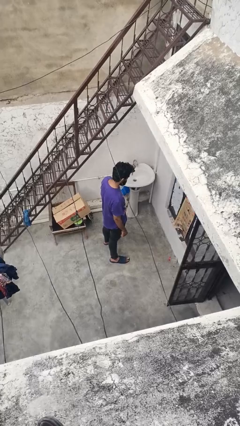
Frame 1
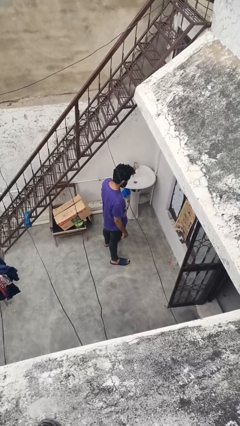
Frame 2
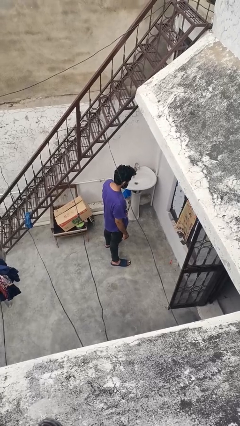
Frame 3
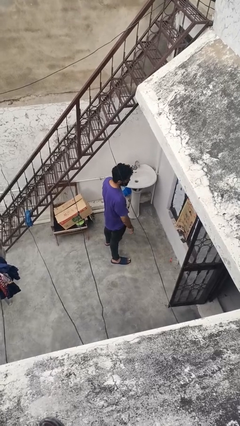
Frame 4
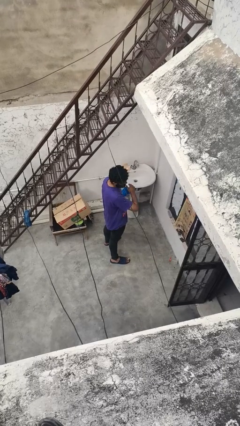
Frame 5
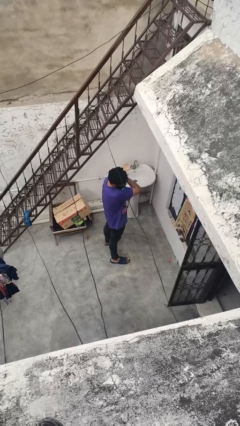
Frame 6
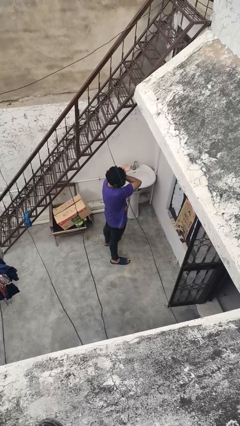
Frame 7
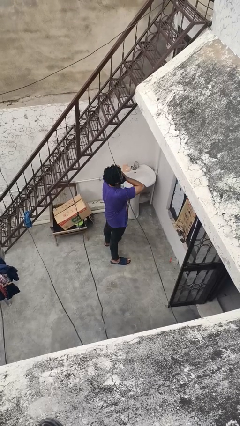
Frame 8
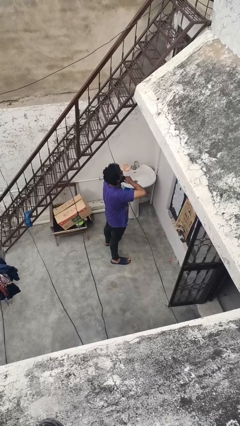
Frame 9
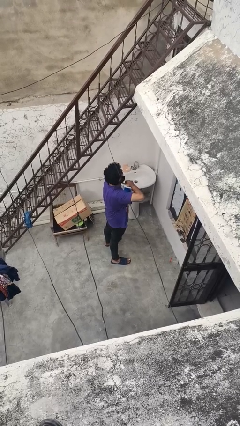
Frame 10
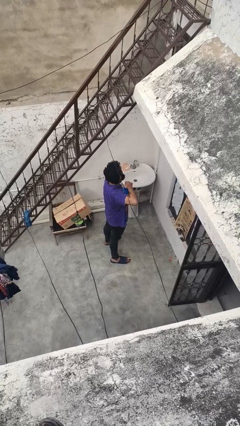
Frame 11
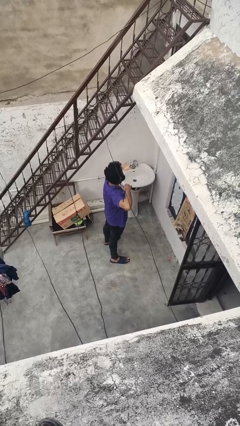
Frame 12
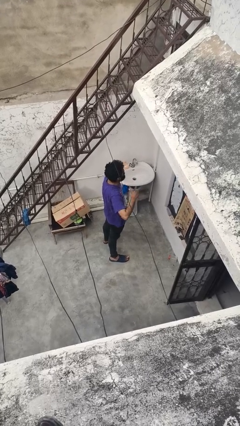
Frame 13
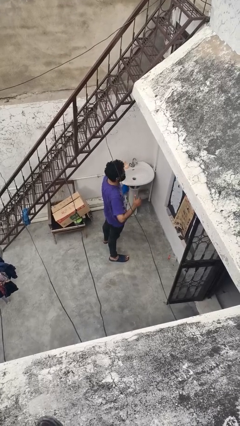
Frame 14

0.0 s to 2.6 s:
person gestures cut

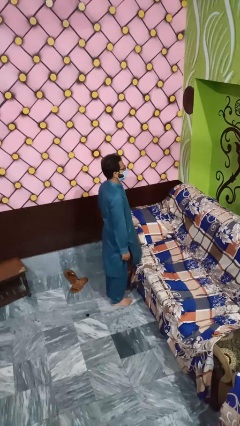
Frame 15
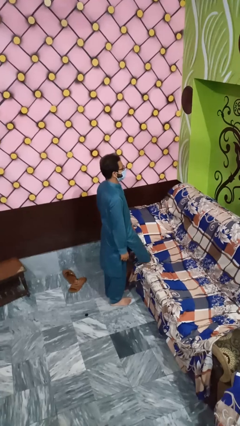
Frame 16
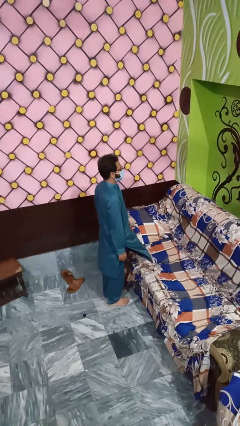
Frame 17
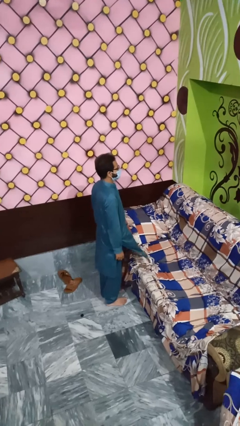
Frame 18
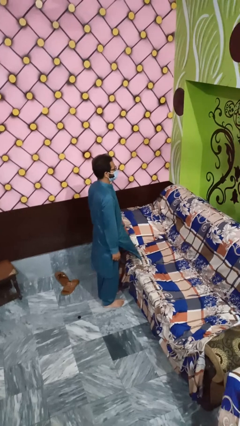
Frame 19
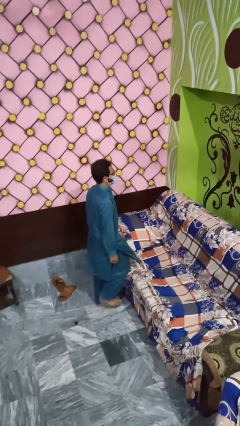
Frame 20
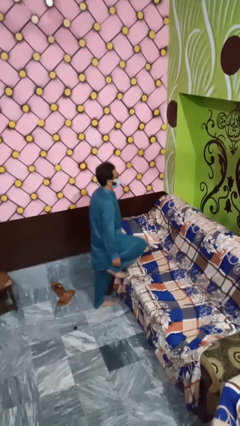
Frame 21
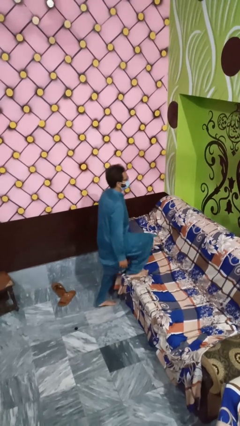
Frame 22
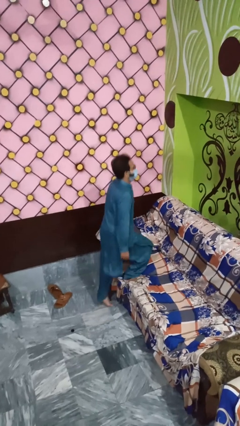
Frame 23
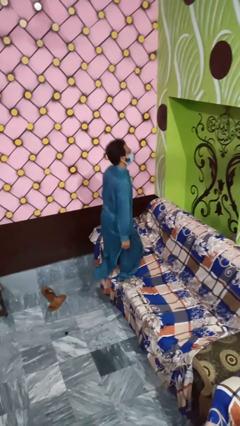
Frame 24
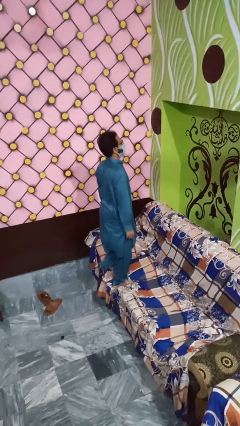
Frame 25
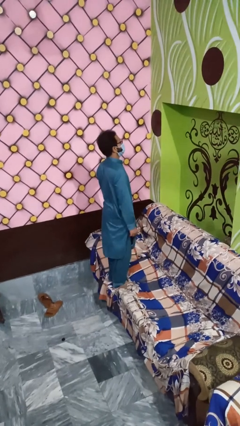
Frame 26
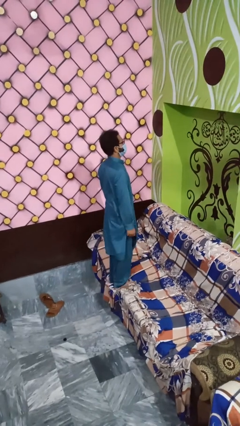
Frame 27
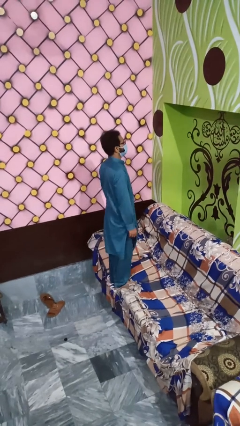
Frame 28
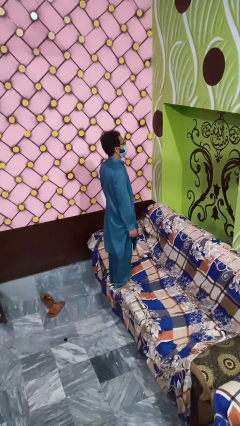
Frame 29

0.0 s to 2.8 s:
person climbs on couch

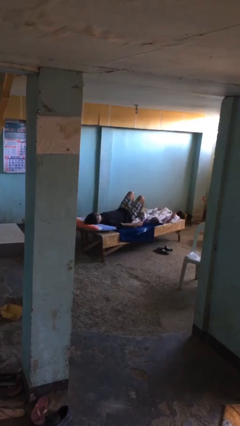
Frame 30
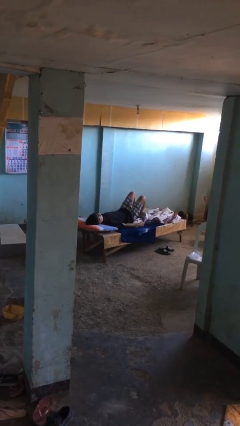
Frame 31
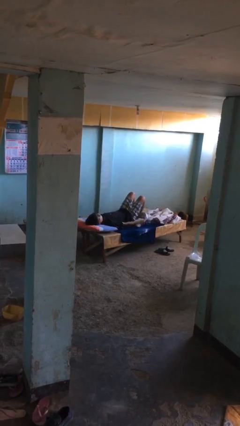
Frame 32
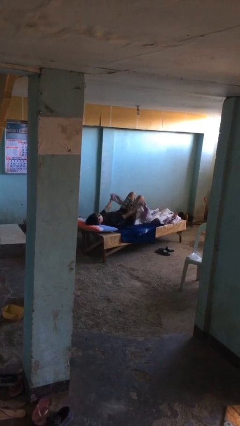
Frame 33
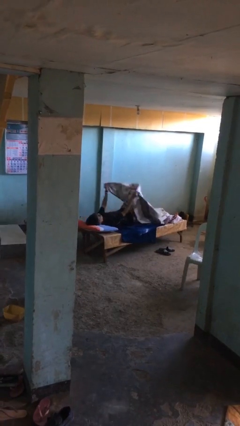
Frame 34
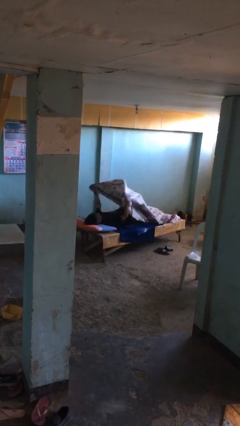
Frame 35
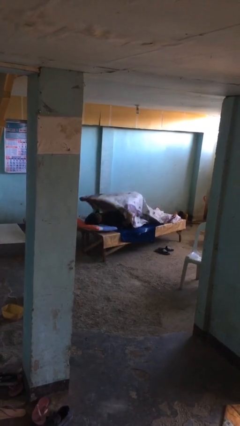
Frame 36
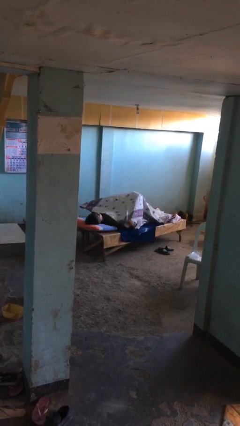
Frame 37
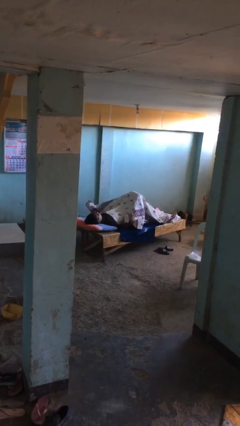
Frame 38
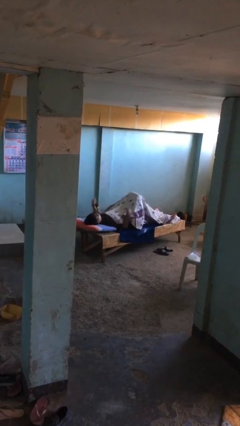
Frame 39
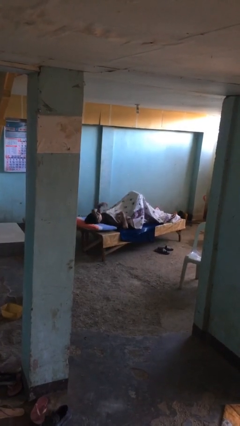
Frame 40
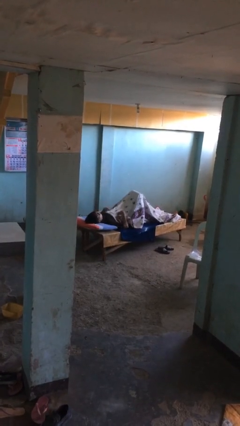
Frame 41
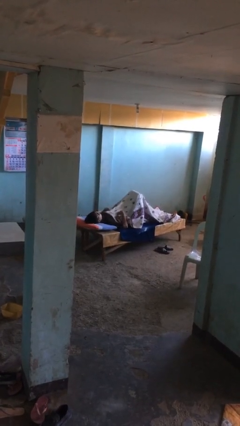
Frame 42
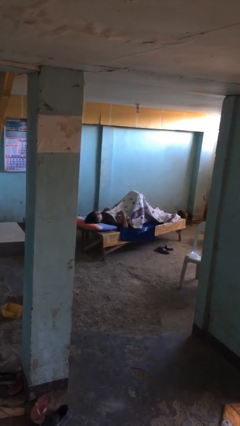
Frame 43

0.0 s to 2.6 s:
person covers with bedsheets

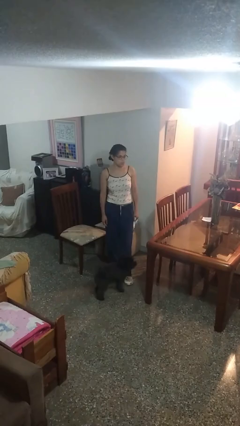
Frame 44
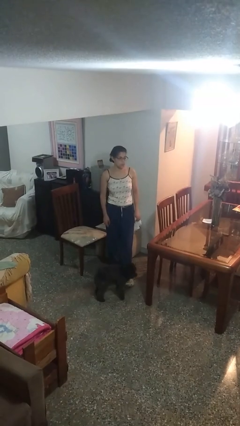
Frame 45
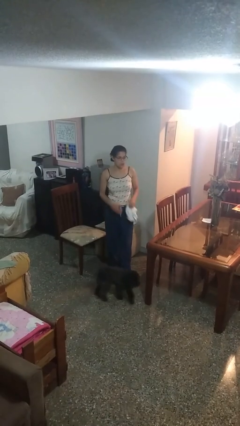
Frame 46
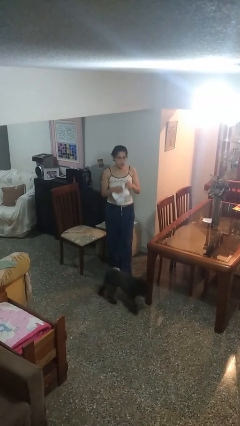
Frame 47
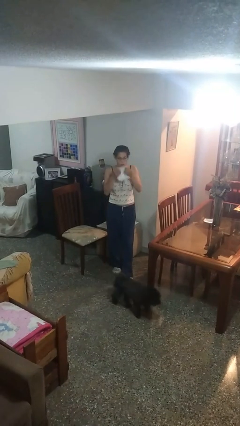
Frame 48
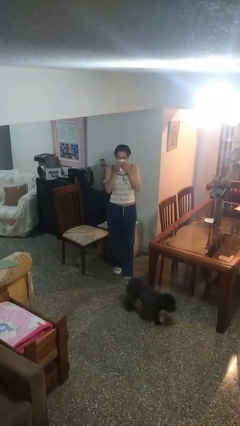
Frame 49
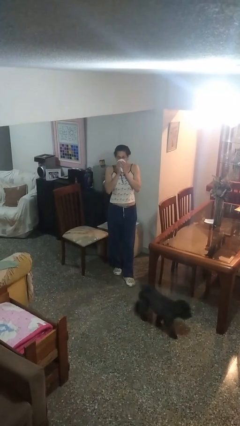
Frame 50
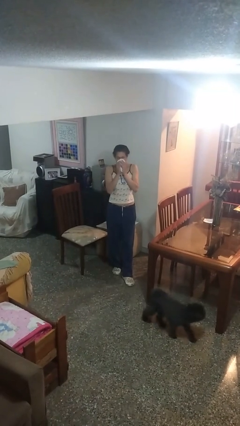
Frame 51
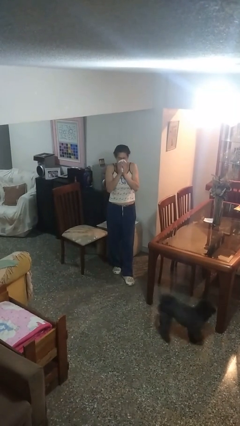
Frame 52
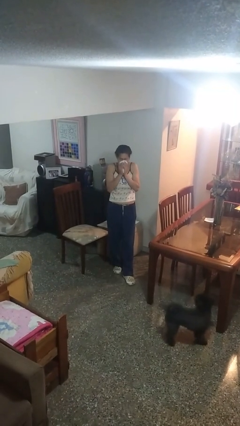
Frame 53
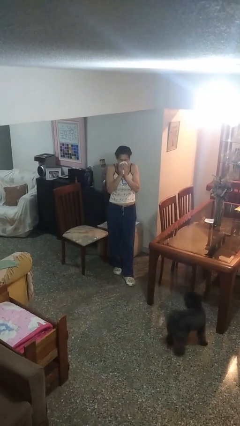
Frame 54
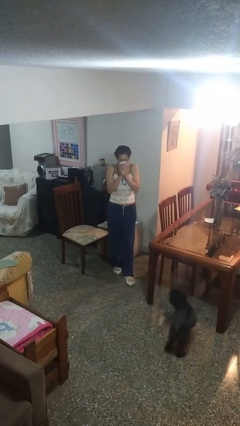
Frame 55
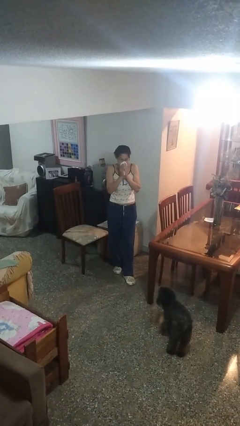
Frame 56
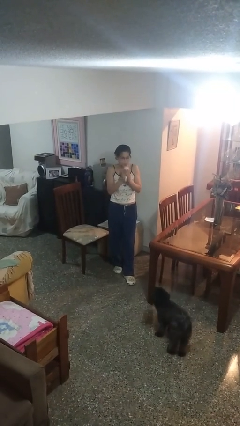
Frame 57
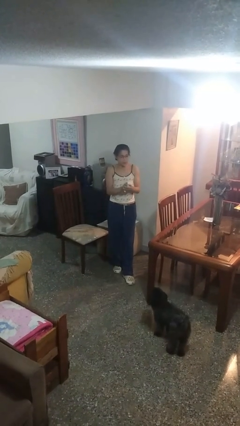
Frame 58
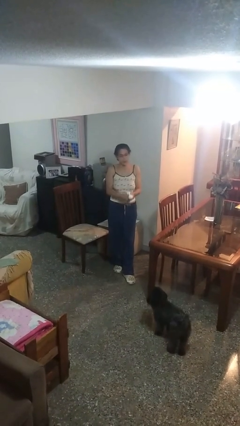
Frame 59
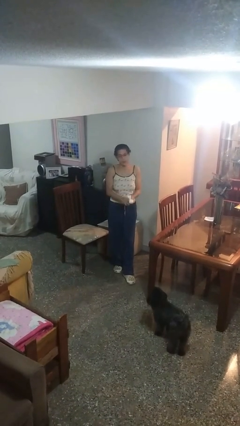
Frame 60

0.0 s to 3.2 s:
person blows nose

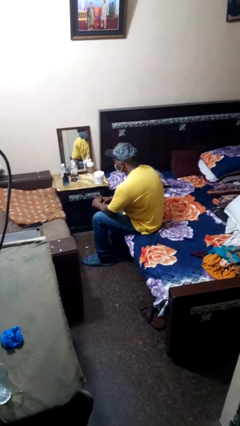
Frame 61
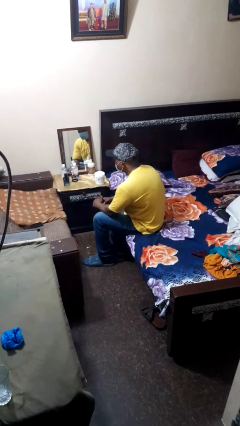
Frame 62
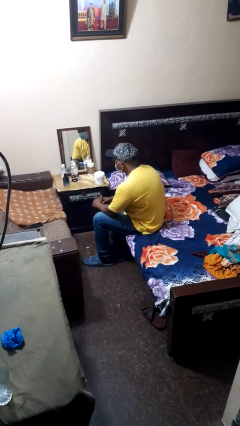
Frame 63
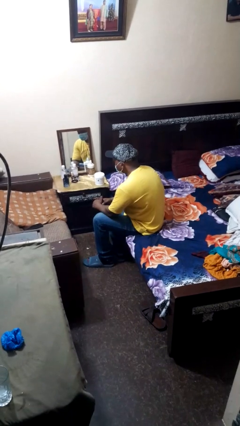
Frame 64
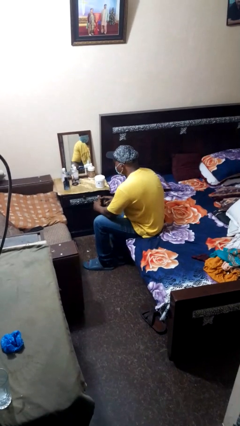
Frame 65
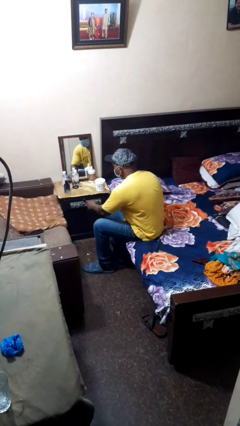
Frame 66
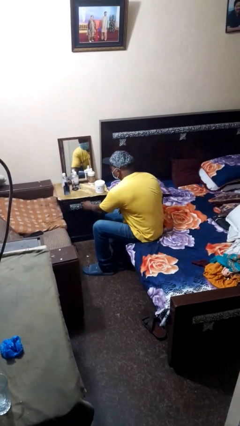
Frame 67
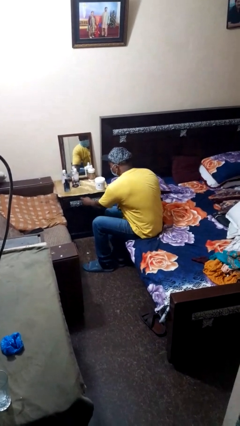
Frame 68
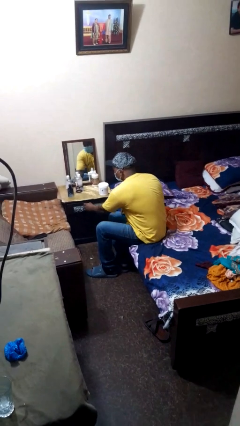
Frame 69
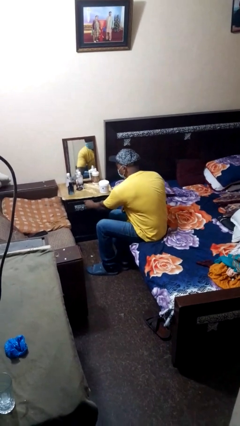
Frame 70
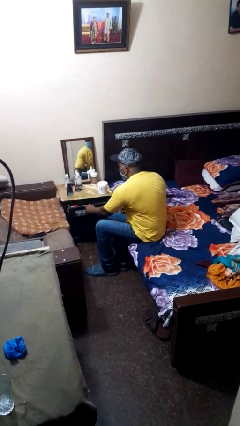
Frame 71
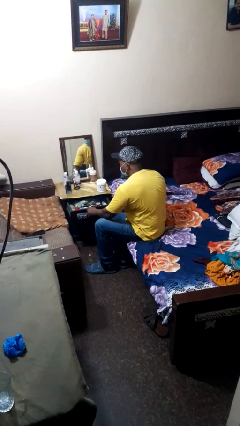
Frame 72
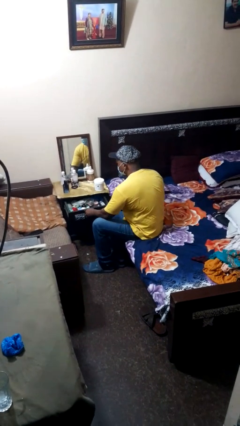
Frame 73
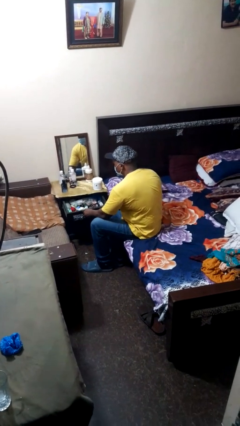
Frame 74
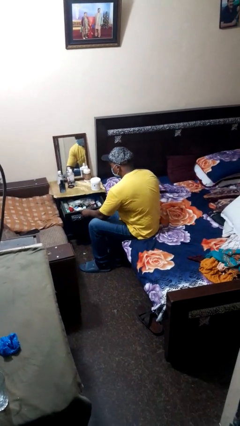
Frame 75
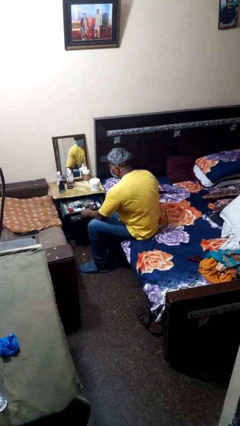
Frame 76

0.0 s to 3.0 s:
person opens dresser drawer

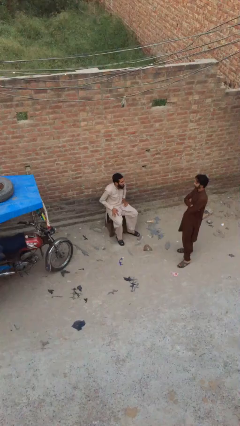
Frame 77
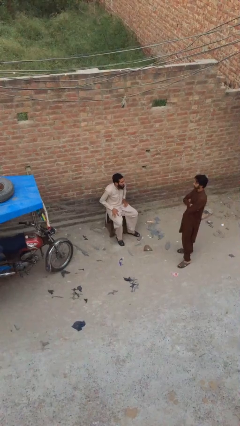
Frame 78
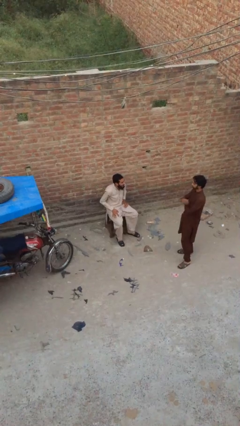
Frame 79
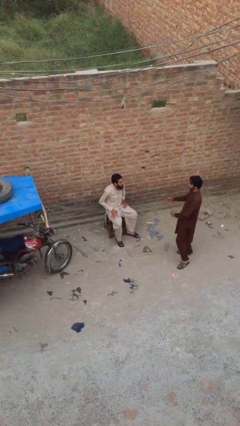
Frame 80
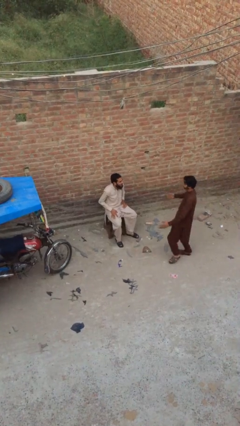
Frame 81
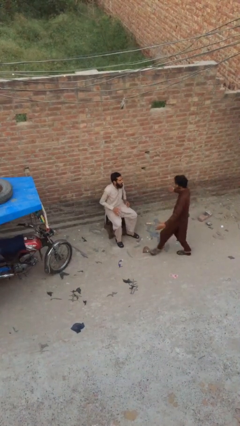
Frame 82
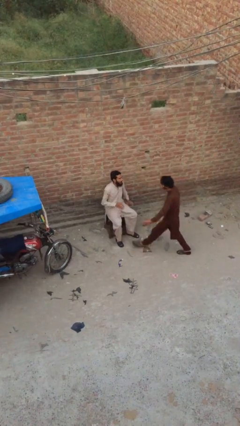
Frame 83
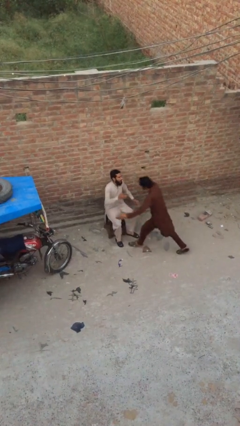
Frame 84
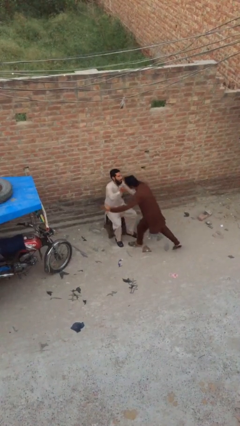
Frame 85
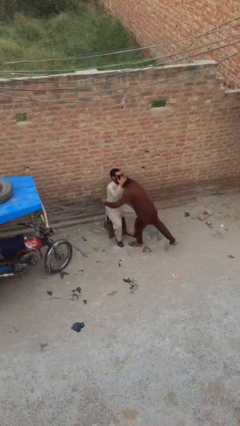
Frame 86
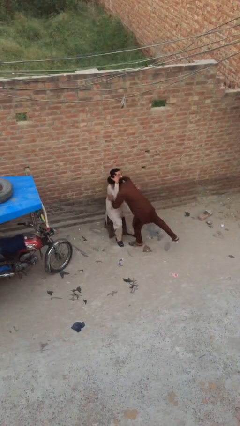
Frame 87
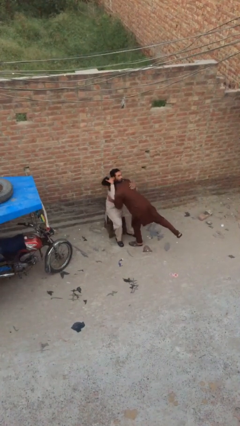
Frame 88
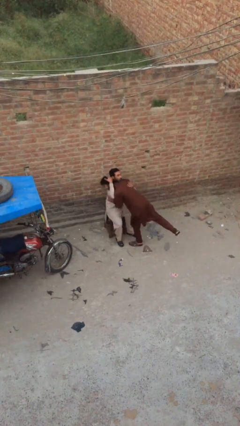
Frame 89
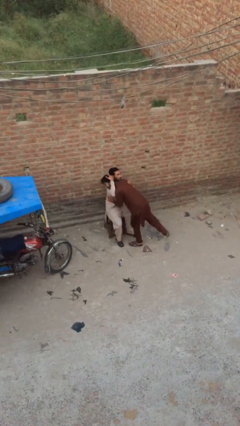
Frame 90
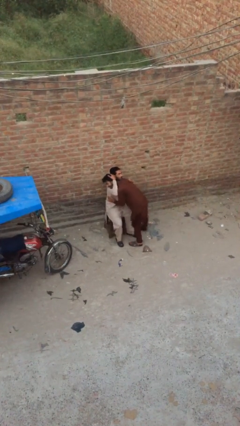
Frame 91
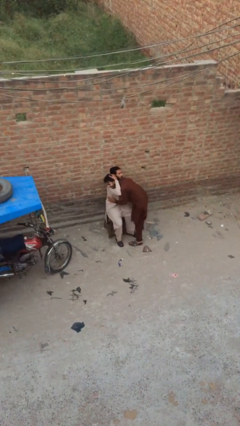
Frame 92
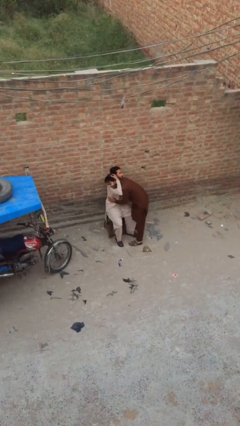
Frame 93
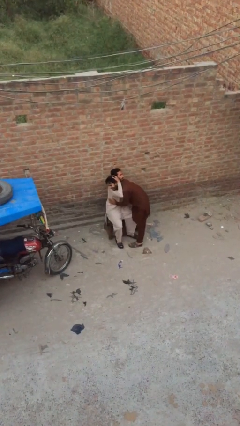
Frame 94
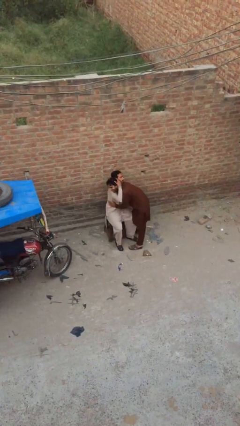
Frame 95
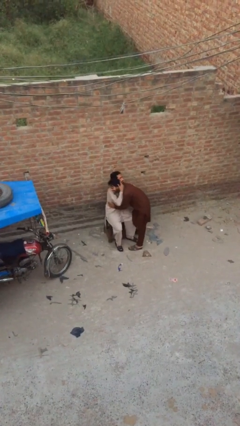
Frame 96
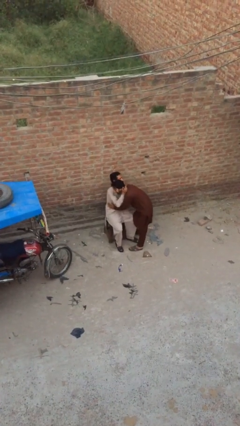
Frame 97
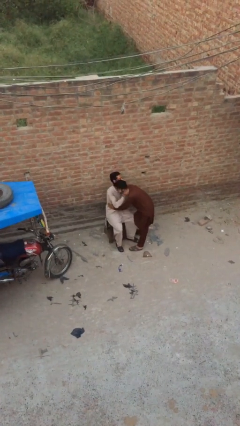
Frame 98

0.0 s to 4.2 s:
person embraces person
